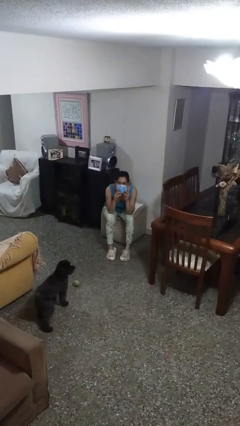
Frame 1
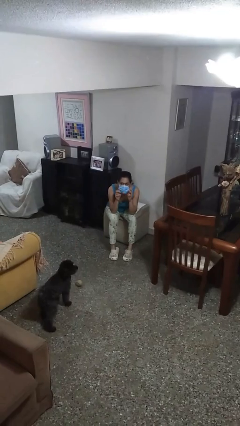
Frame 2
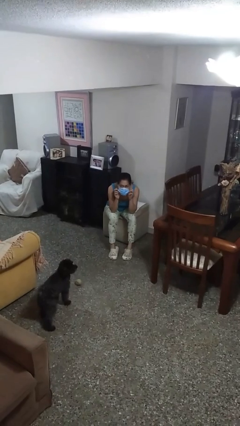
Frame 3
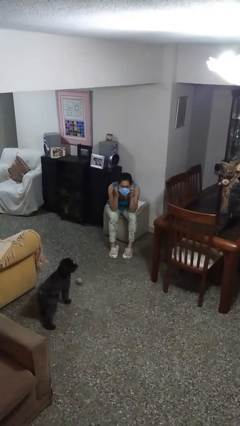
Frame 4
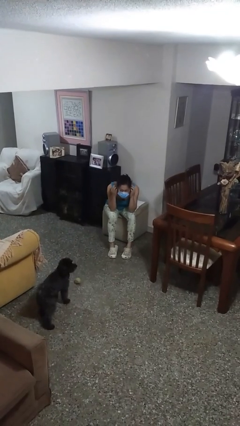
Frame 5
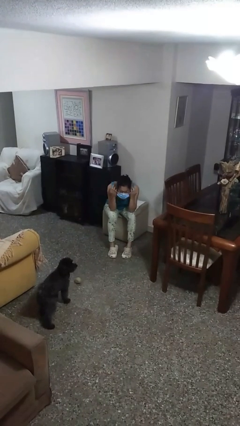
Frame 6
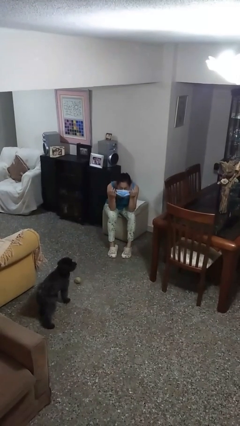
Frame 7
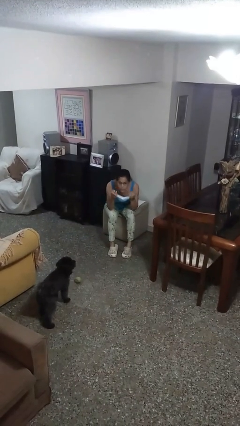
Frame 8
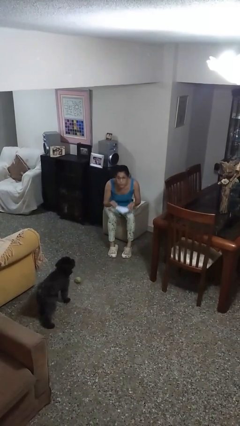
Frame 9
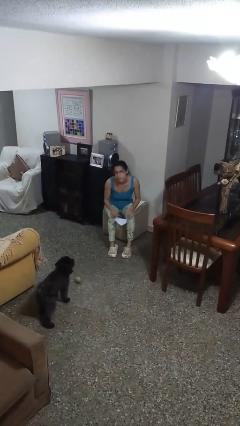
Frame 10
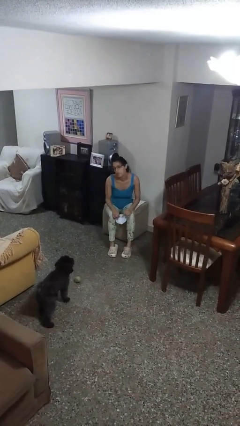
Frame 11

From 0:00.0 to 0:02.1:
person takes off facemask

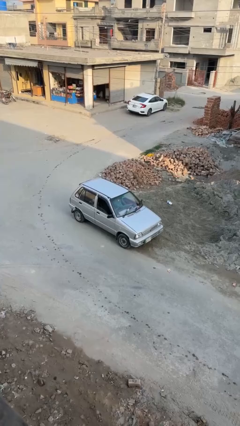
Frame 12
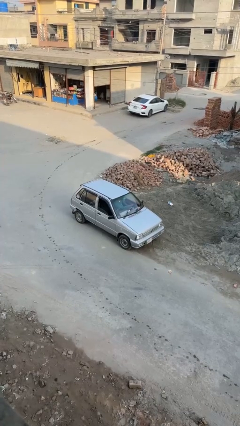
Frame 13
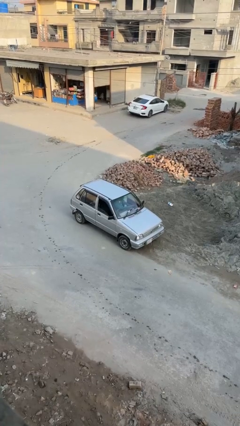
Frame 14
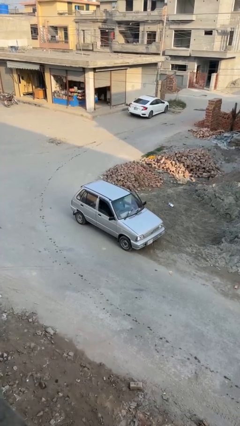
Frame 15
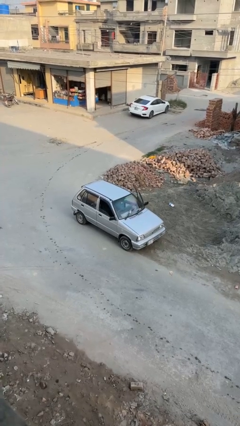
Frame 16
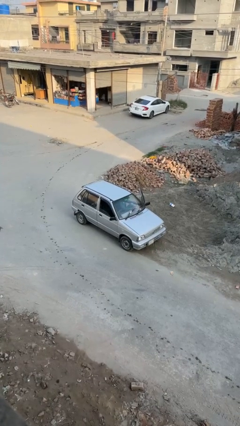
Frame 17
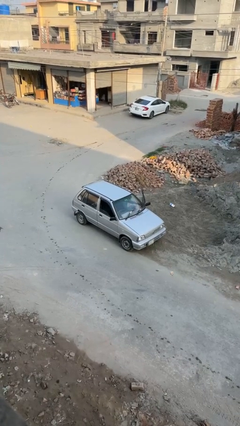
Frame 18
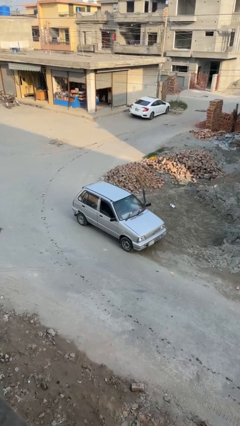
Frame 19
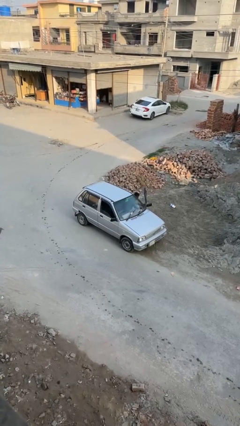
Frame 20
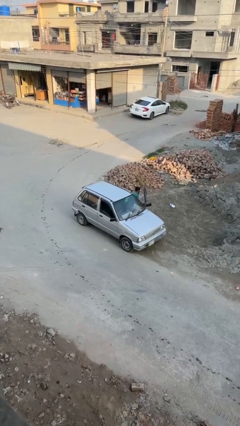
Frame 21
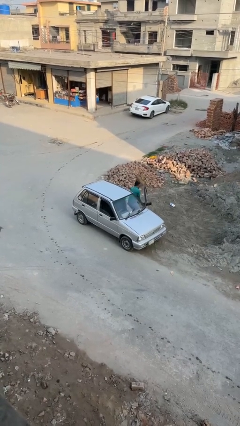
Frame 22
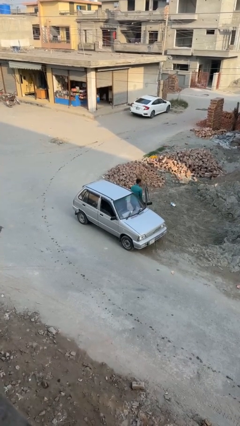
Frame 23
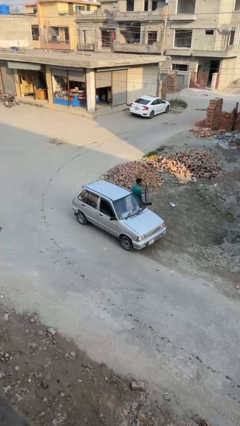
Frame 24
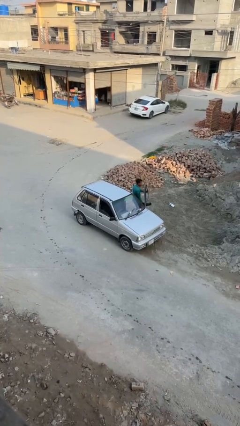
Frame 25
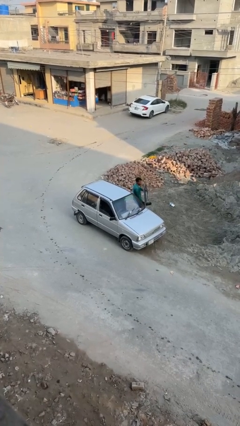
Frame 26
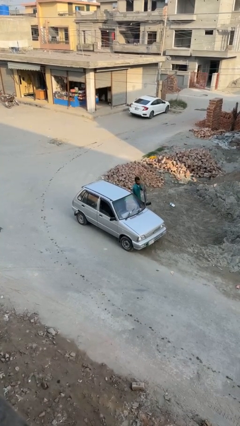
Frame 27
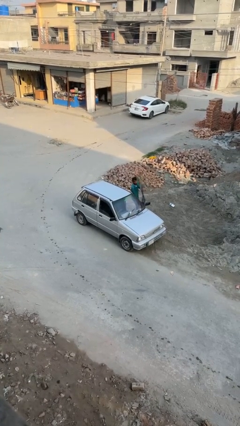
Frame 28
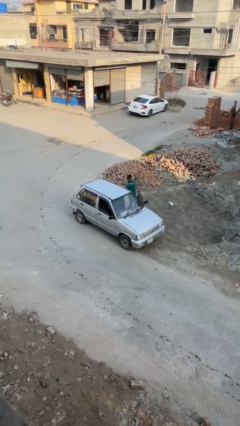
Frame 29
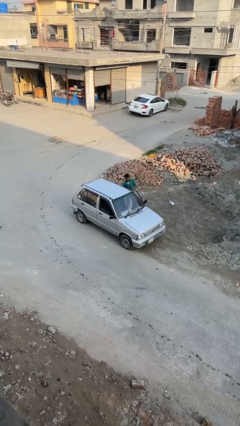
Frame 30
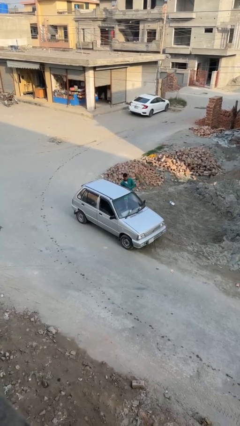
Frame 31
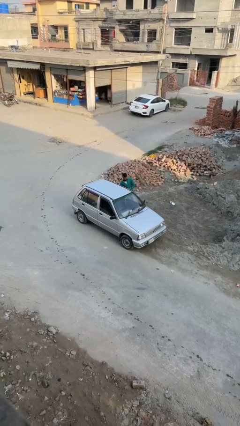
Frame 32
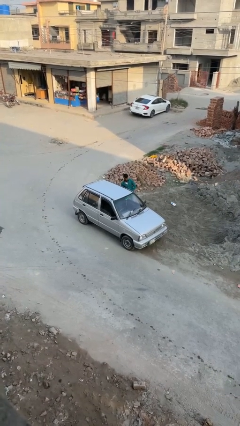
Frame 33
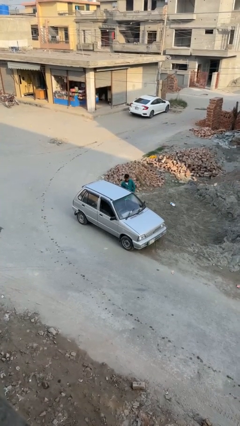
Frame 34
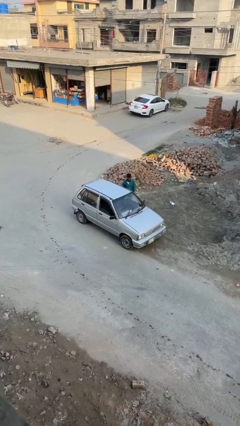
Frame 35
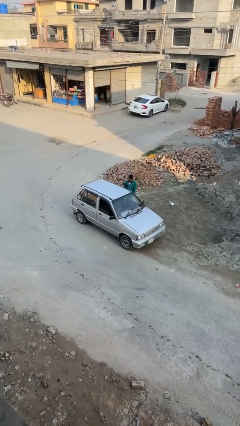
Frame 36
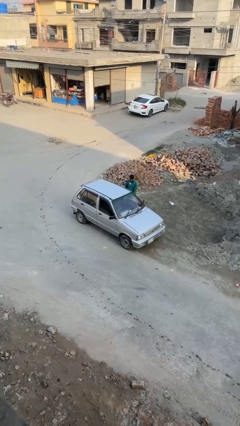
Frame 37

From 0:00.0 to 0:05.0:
car drops off person

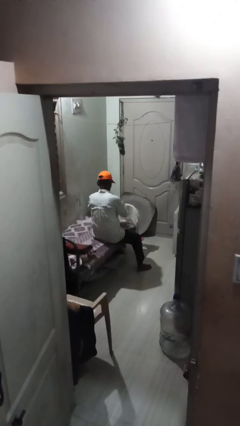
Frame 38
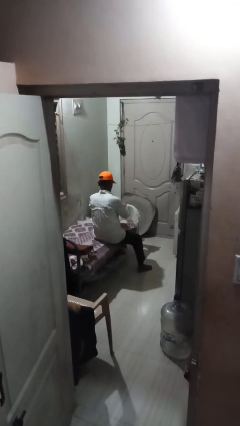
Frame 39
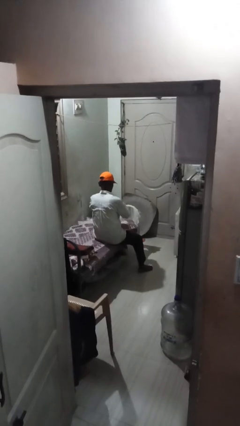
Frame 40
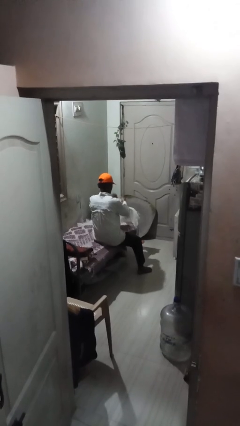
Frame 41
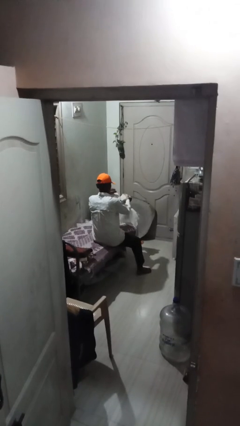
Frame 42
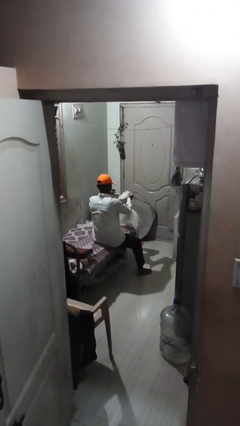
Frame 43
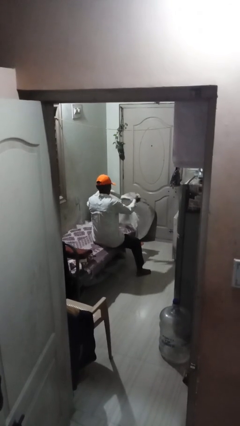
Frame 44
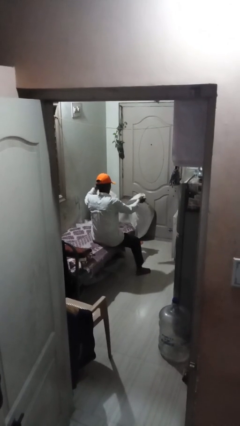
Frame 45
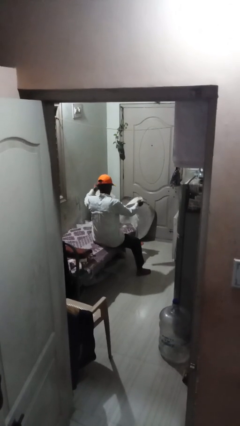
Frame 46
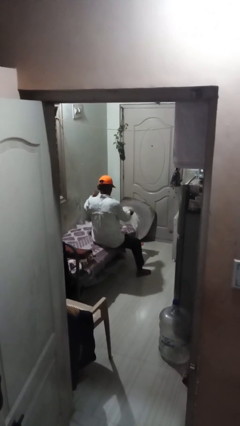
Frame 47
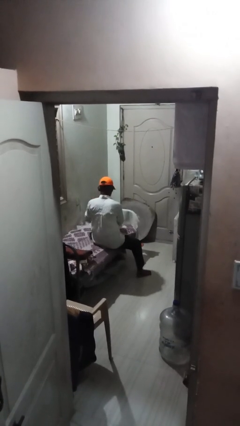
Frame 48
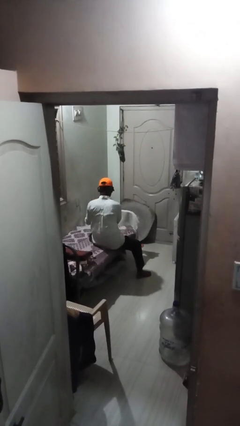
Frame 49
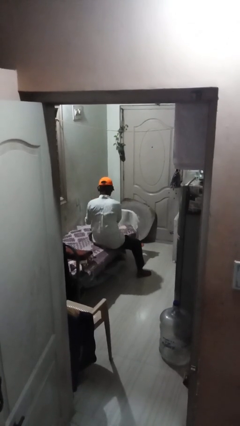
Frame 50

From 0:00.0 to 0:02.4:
person tears paper

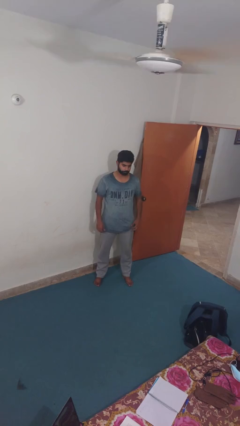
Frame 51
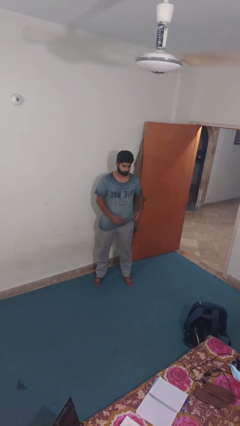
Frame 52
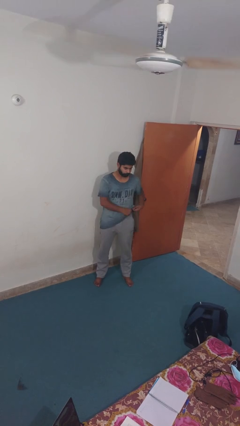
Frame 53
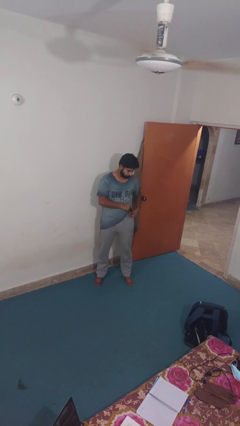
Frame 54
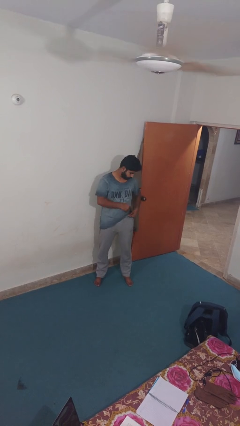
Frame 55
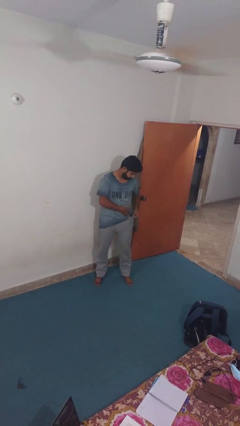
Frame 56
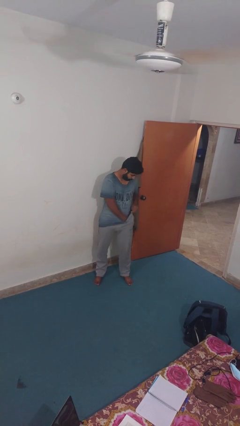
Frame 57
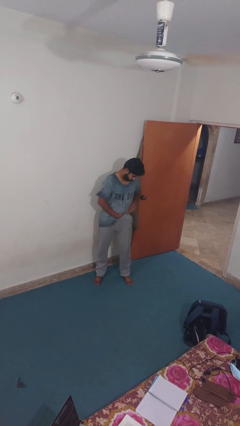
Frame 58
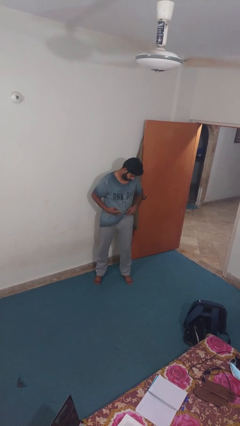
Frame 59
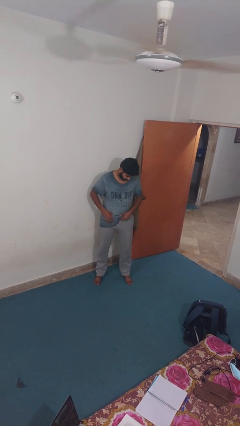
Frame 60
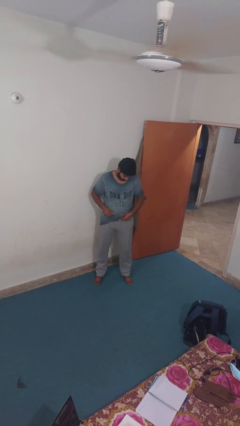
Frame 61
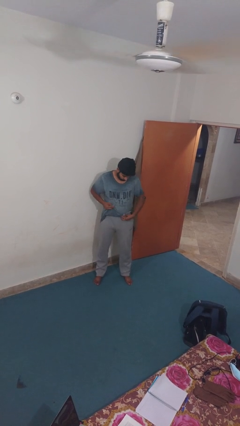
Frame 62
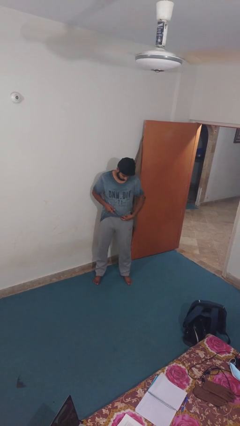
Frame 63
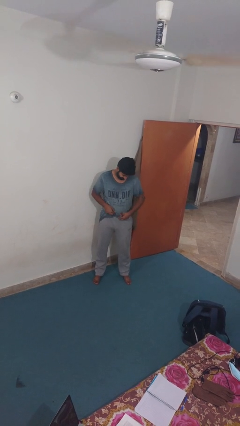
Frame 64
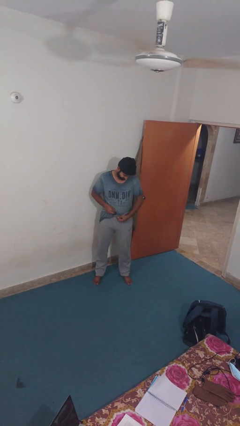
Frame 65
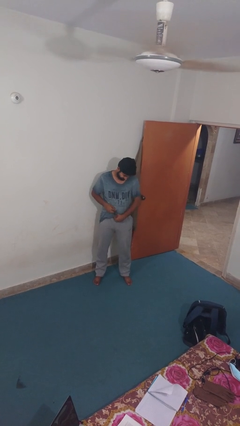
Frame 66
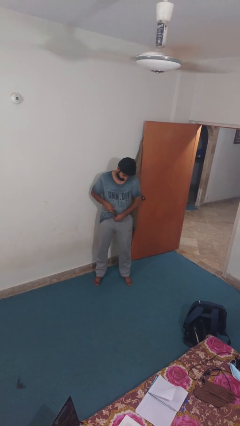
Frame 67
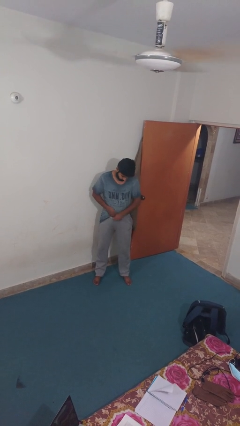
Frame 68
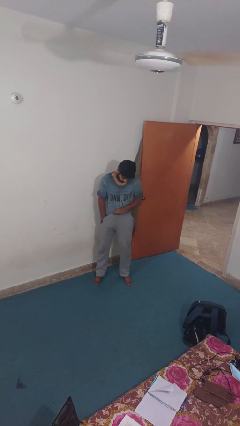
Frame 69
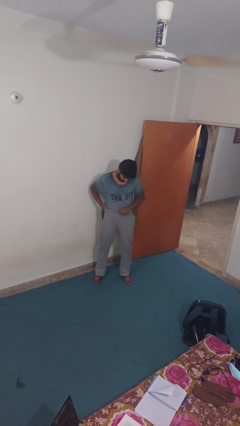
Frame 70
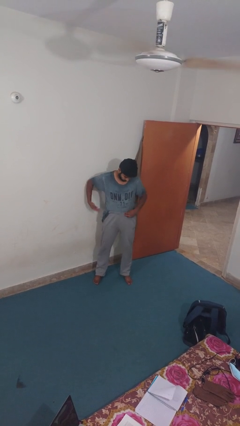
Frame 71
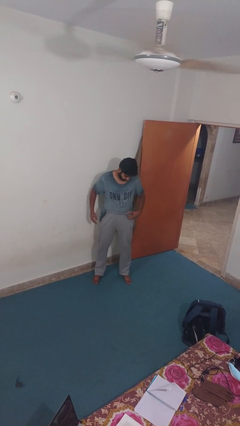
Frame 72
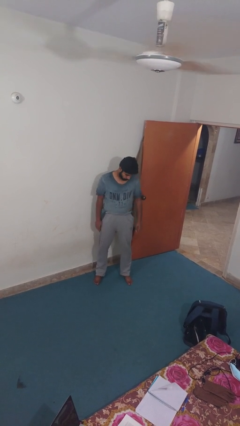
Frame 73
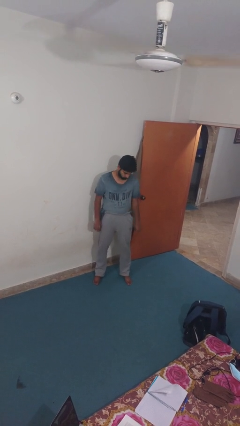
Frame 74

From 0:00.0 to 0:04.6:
person tucks in shirt

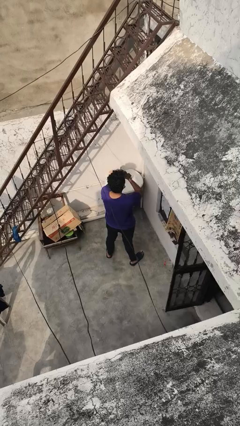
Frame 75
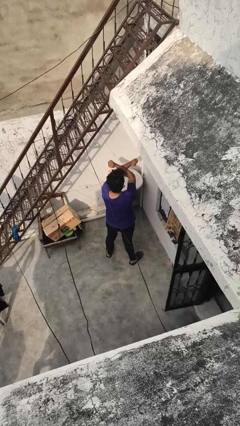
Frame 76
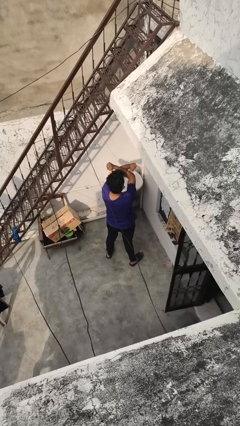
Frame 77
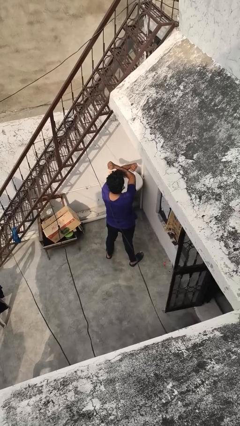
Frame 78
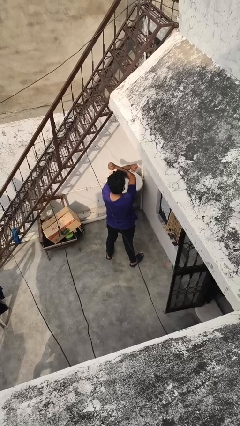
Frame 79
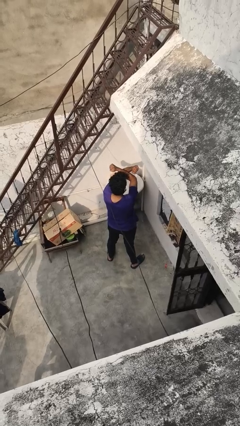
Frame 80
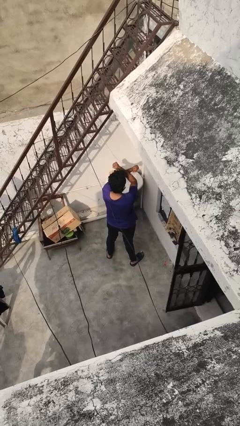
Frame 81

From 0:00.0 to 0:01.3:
person gestures arms x

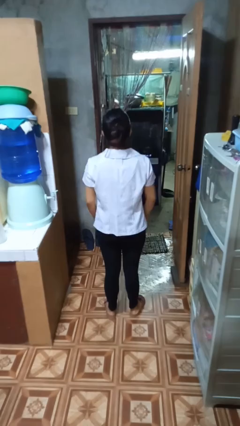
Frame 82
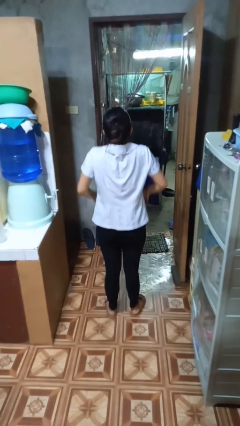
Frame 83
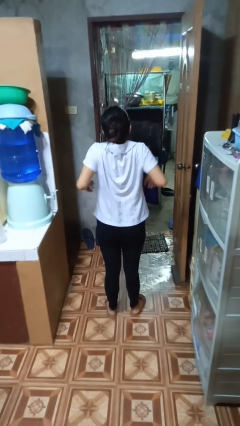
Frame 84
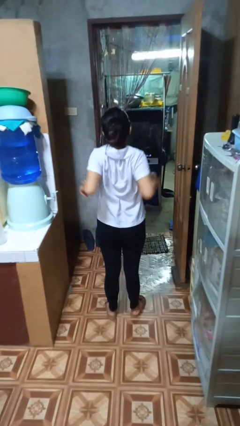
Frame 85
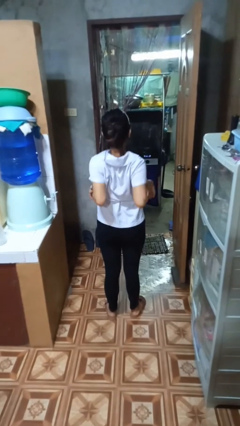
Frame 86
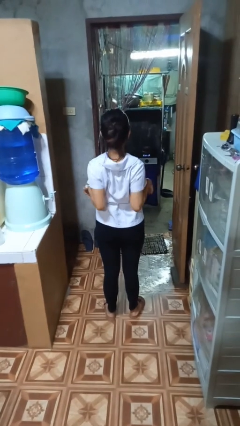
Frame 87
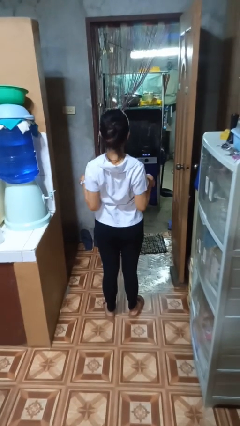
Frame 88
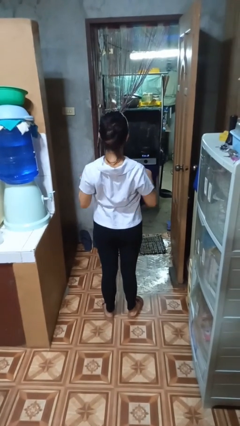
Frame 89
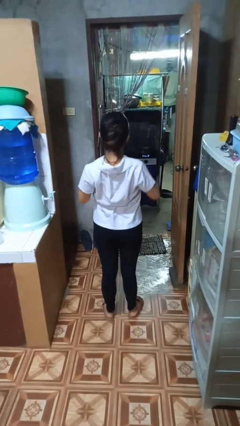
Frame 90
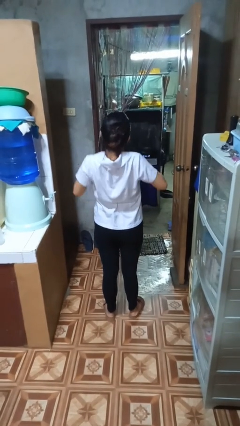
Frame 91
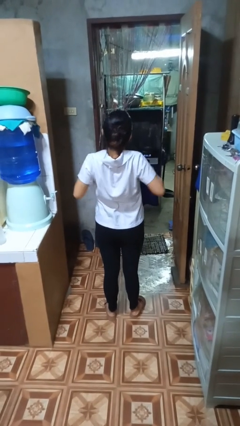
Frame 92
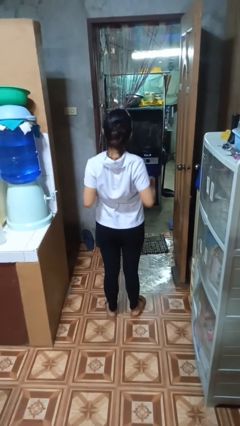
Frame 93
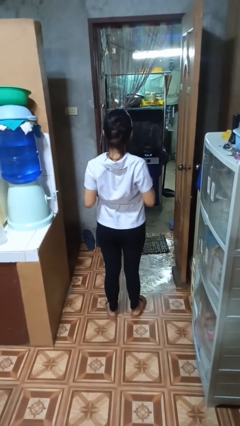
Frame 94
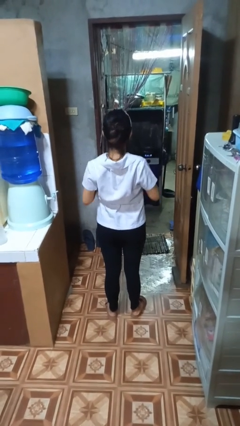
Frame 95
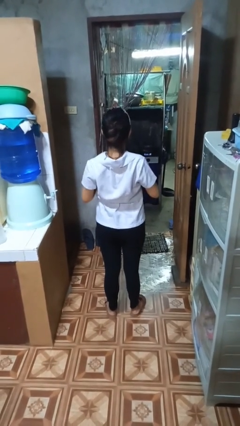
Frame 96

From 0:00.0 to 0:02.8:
person stretches back
